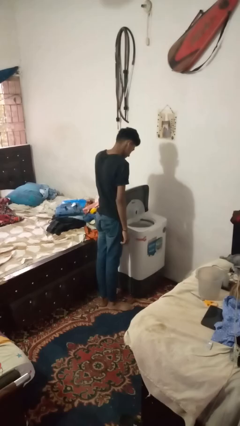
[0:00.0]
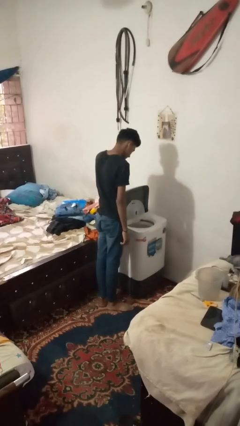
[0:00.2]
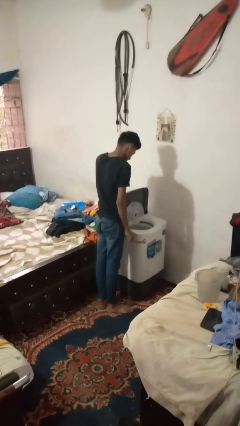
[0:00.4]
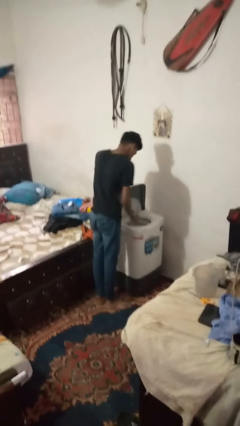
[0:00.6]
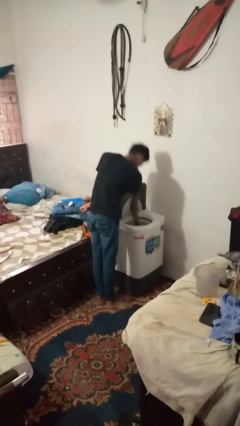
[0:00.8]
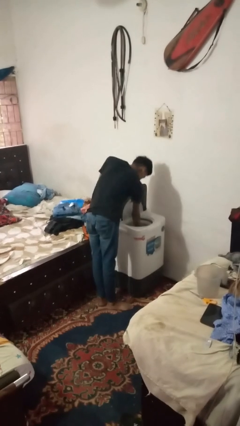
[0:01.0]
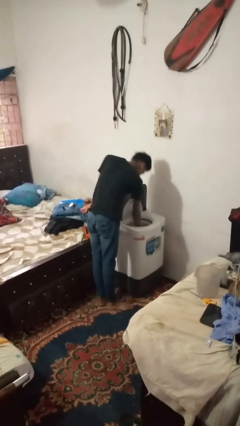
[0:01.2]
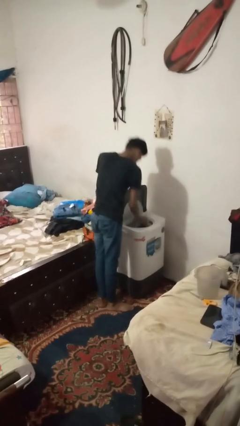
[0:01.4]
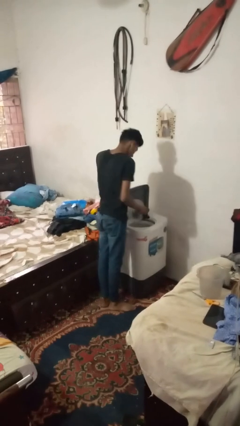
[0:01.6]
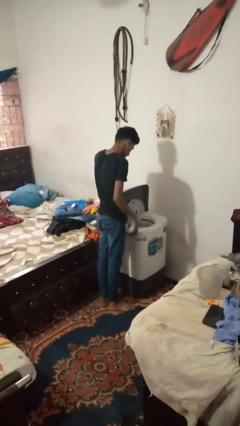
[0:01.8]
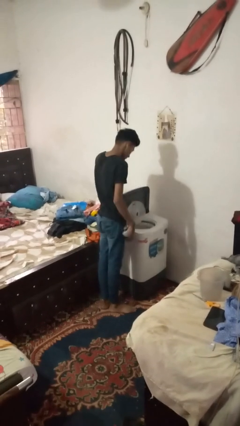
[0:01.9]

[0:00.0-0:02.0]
person unloads dryer

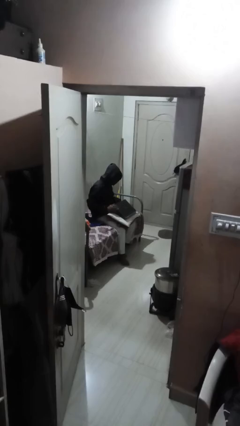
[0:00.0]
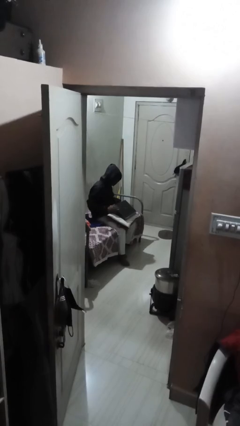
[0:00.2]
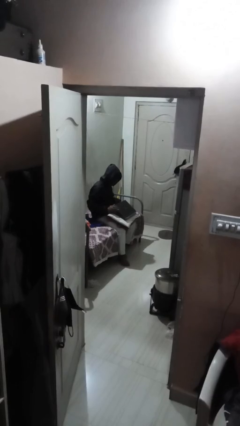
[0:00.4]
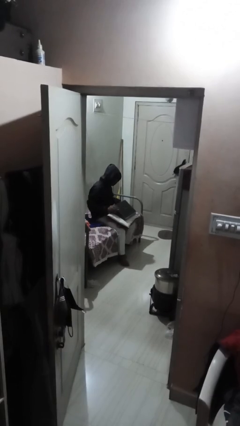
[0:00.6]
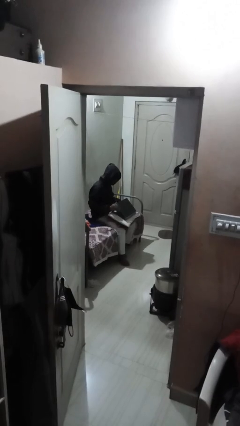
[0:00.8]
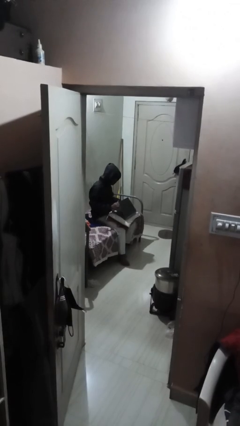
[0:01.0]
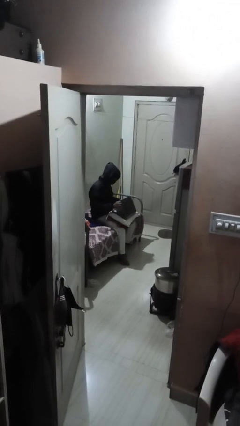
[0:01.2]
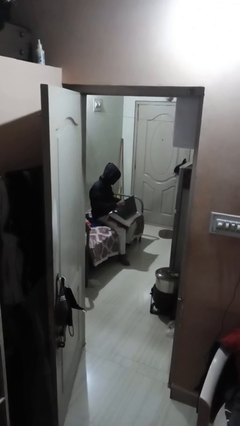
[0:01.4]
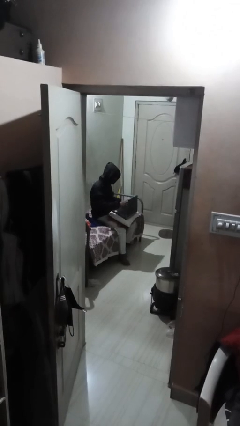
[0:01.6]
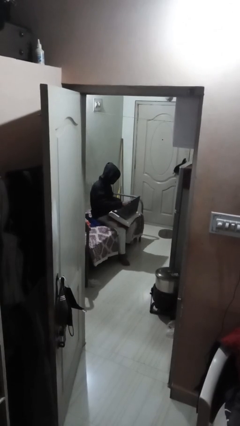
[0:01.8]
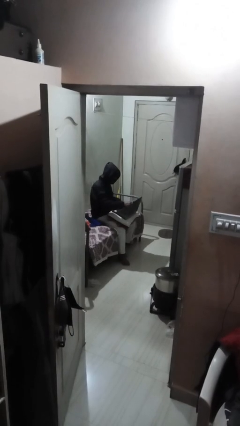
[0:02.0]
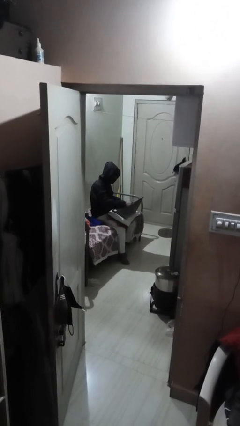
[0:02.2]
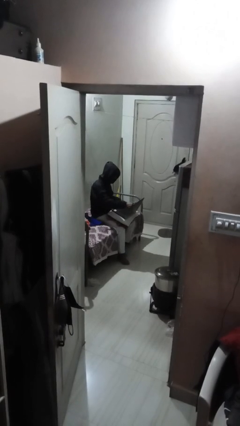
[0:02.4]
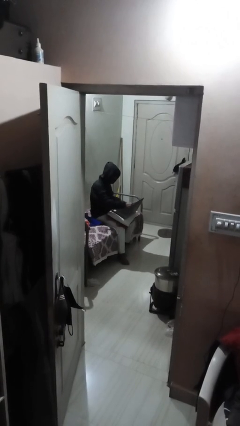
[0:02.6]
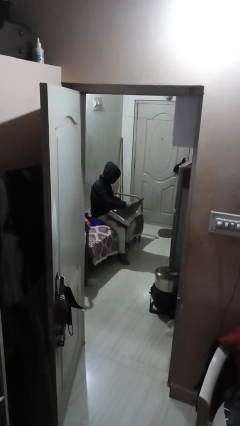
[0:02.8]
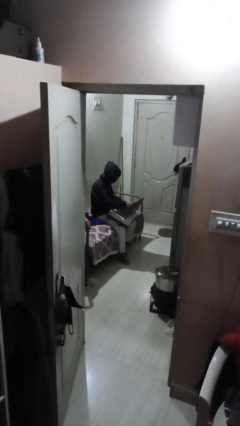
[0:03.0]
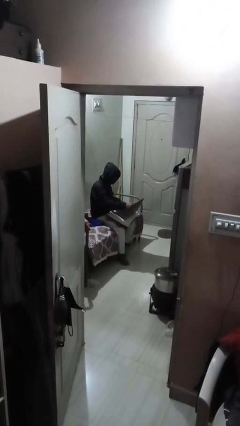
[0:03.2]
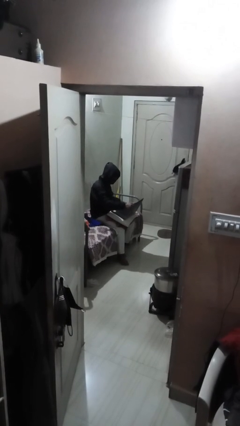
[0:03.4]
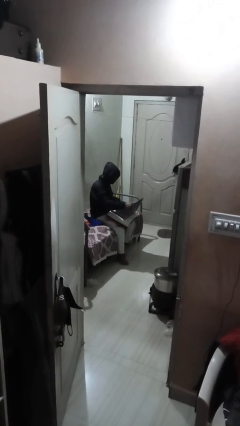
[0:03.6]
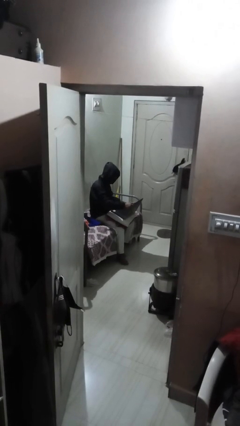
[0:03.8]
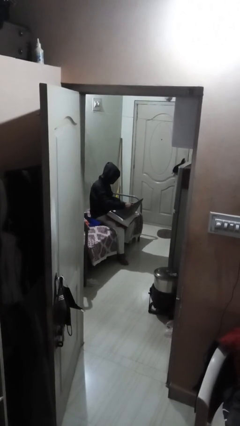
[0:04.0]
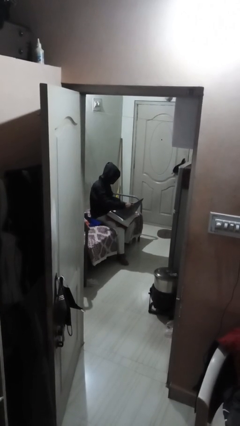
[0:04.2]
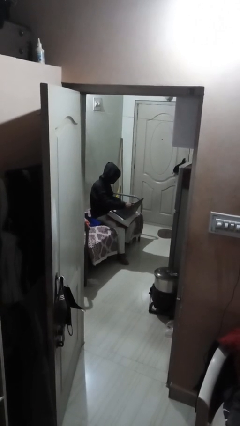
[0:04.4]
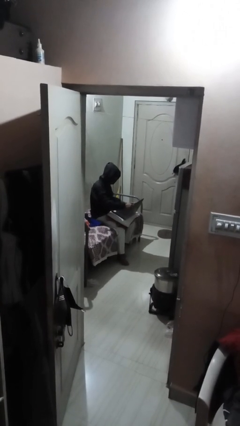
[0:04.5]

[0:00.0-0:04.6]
person interacts with laptop

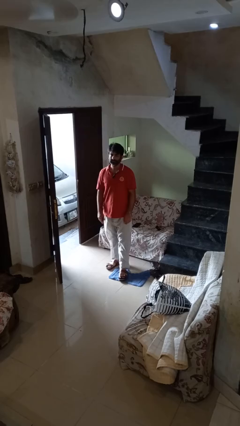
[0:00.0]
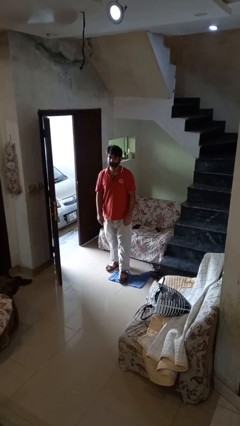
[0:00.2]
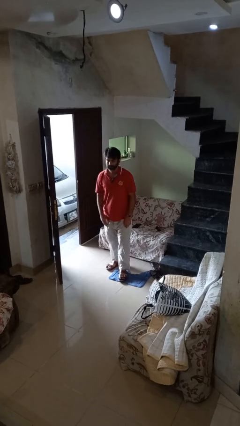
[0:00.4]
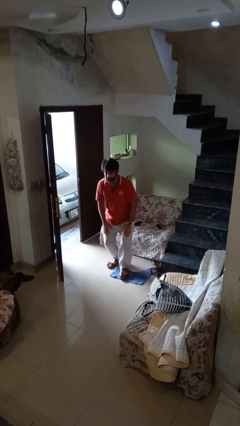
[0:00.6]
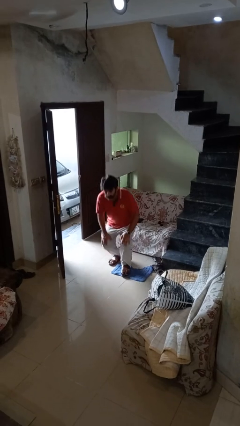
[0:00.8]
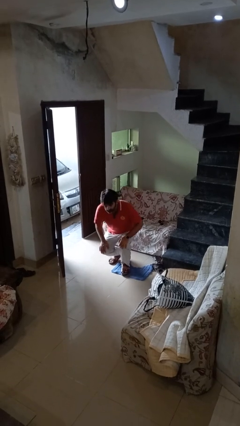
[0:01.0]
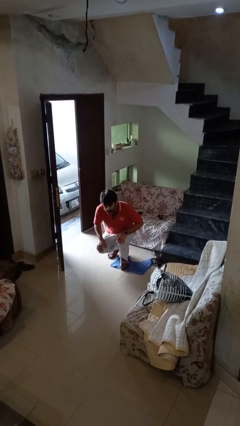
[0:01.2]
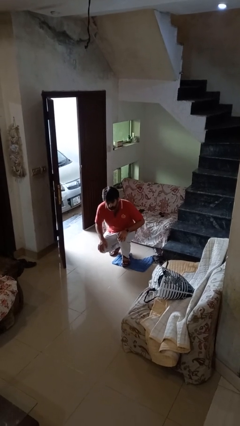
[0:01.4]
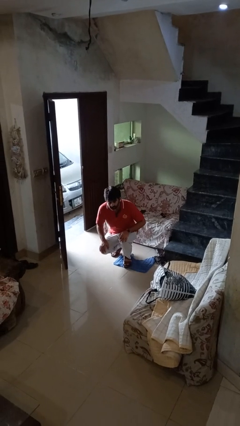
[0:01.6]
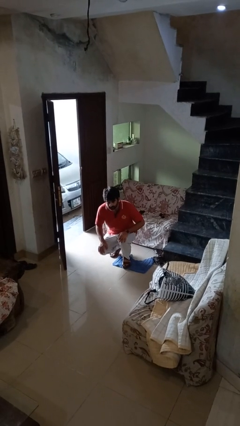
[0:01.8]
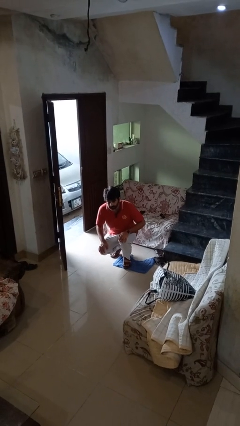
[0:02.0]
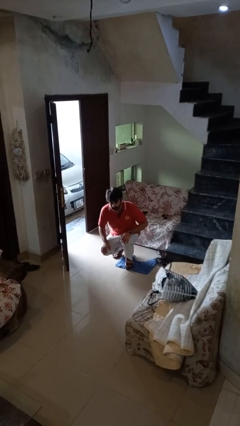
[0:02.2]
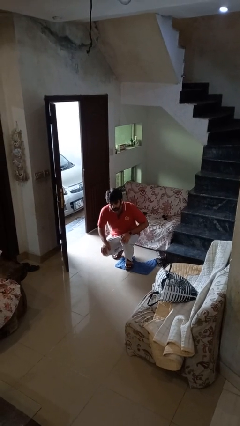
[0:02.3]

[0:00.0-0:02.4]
person squats

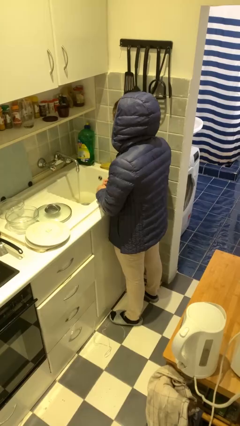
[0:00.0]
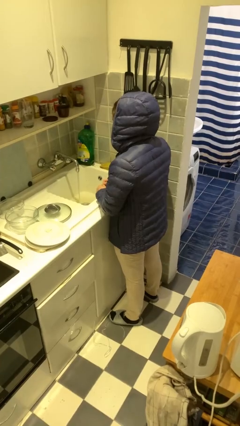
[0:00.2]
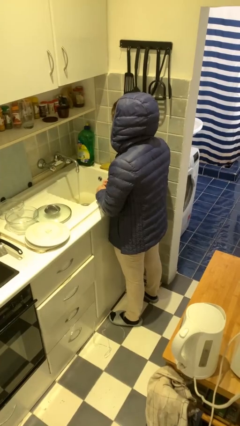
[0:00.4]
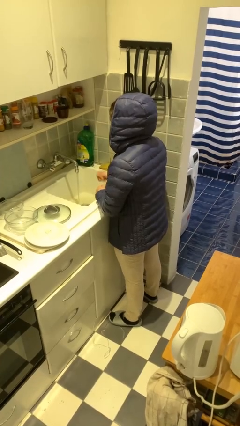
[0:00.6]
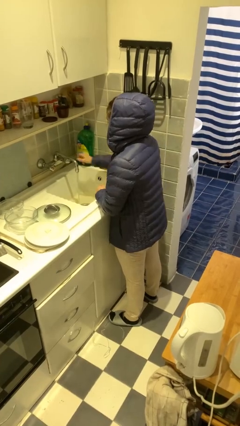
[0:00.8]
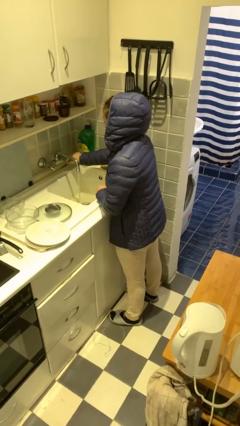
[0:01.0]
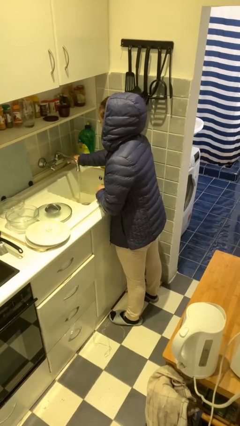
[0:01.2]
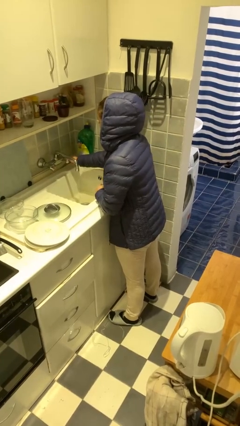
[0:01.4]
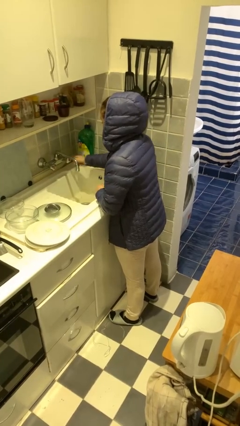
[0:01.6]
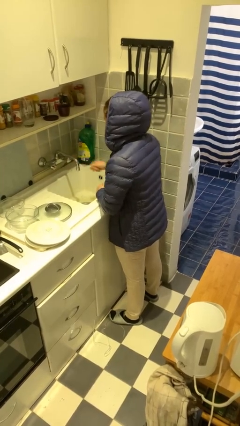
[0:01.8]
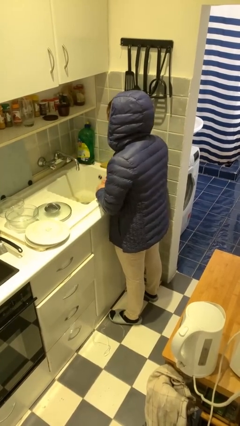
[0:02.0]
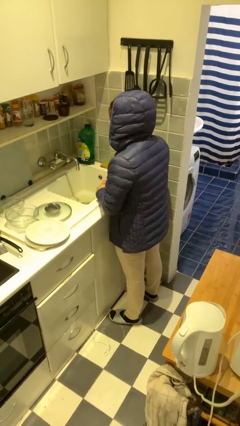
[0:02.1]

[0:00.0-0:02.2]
person turns off faucet

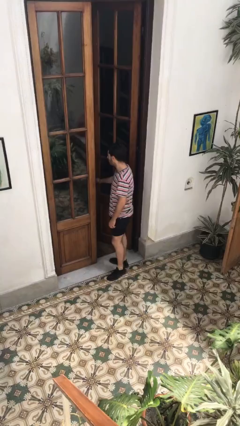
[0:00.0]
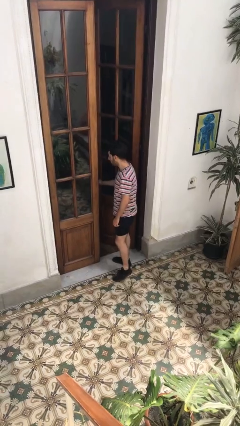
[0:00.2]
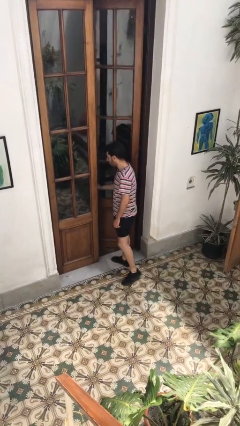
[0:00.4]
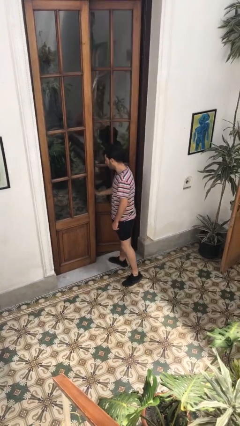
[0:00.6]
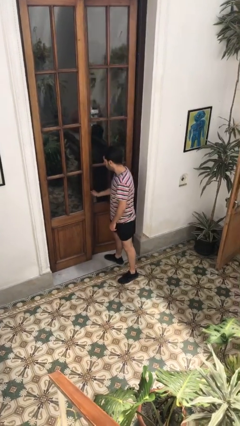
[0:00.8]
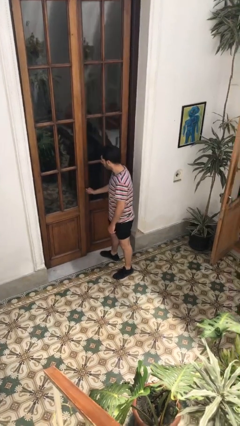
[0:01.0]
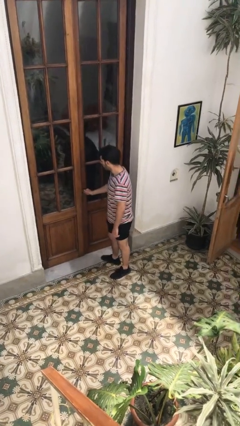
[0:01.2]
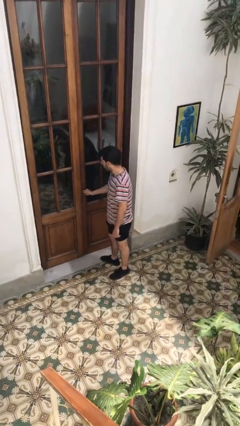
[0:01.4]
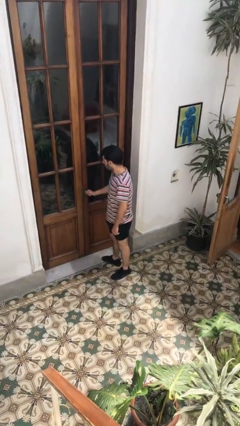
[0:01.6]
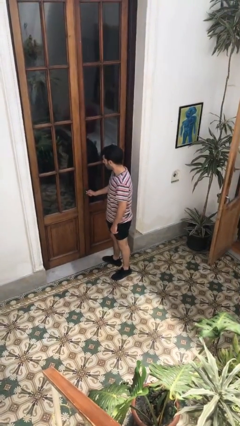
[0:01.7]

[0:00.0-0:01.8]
person closes facility door

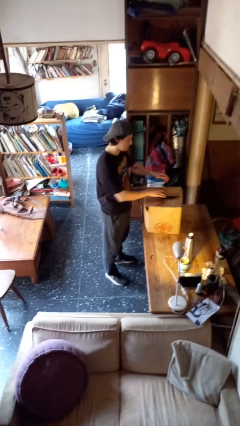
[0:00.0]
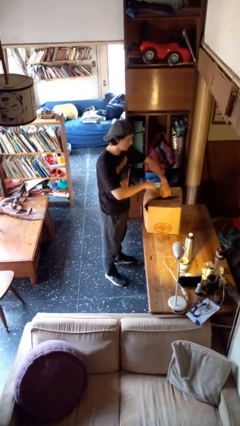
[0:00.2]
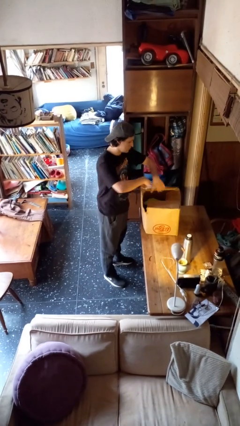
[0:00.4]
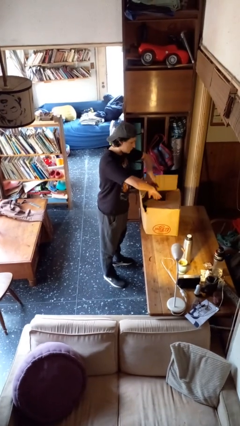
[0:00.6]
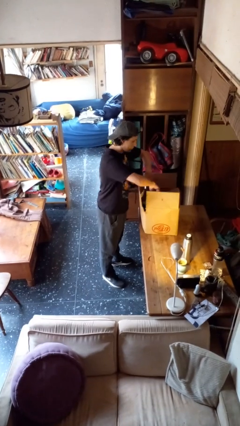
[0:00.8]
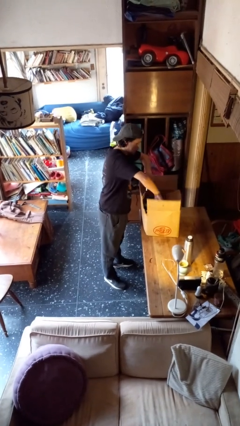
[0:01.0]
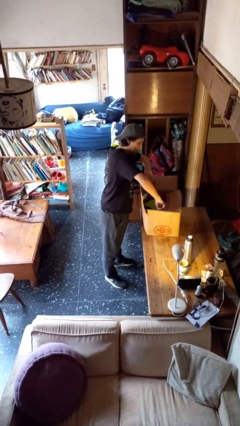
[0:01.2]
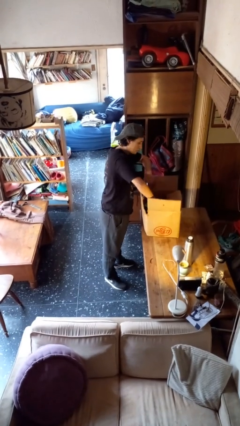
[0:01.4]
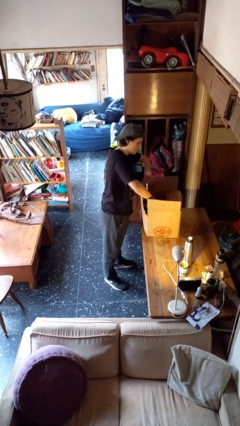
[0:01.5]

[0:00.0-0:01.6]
person opens box

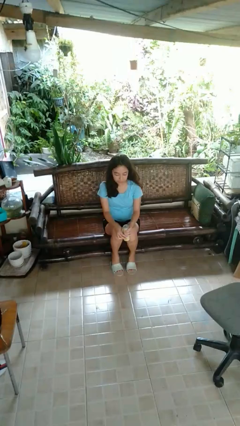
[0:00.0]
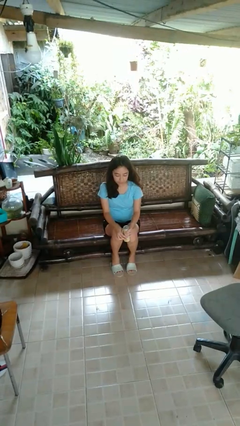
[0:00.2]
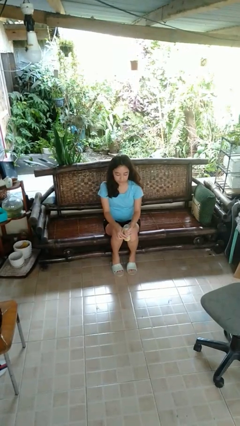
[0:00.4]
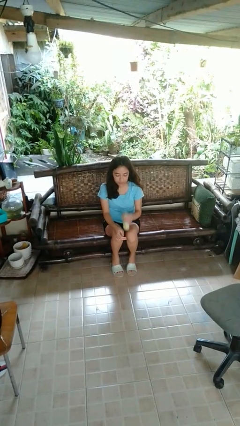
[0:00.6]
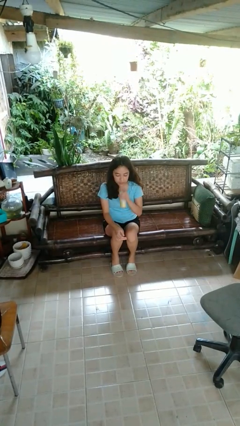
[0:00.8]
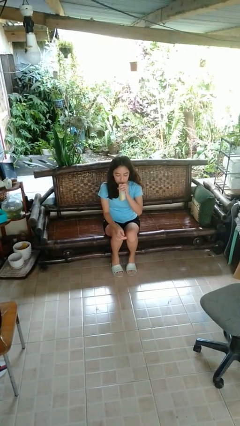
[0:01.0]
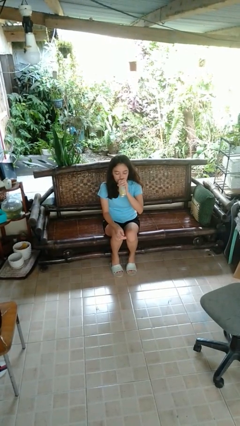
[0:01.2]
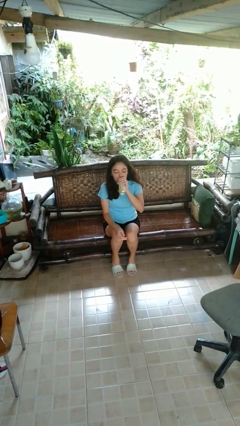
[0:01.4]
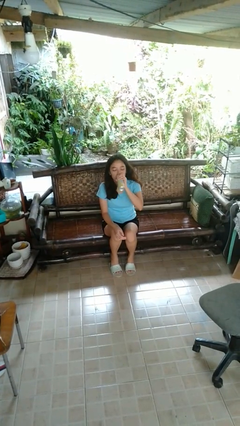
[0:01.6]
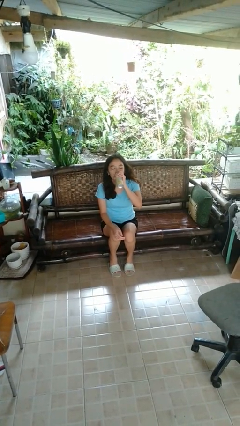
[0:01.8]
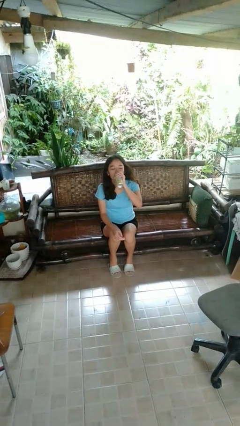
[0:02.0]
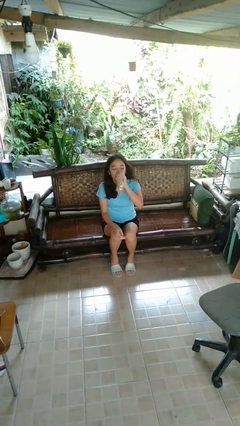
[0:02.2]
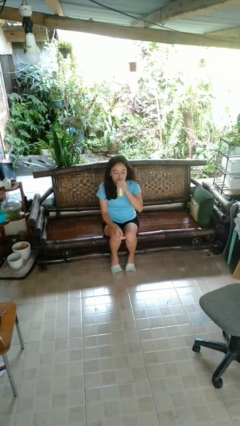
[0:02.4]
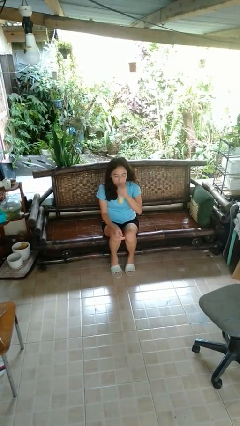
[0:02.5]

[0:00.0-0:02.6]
person drinks from beverage can
